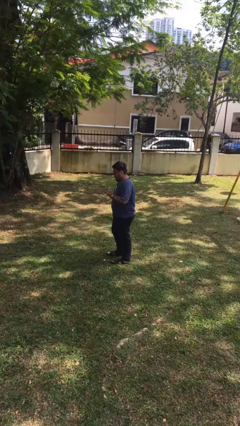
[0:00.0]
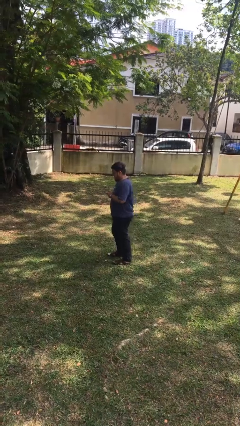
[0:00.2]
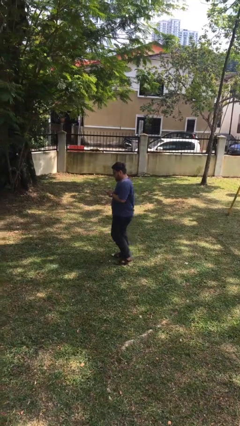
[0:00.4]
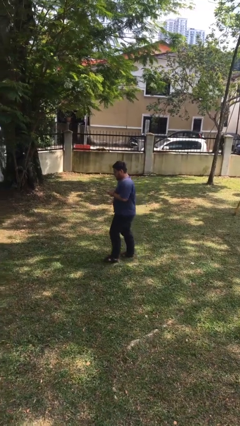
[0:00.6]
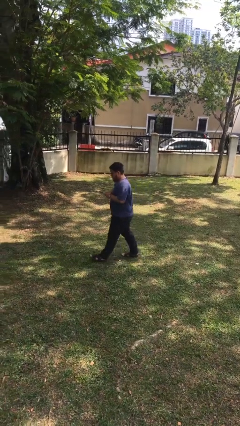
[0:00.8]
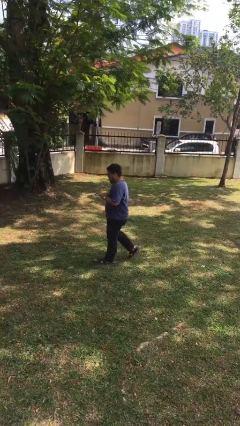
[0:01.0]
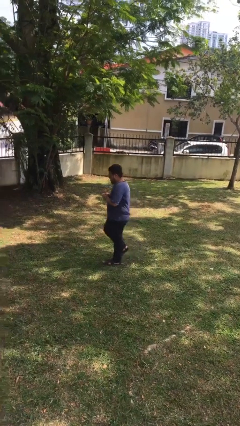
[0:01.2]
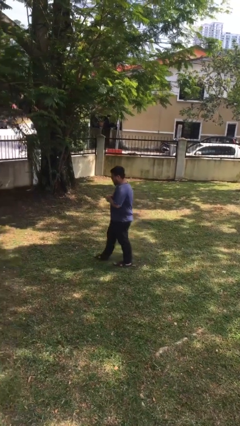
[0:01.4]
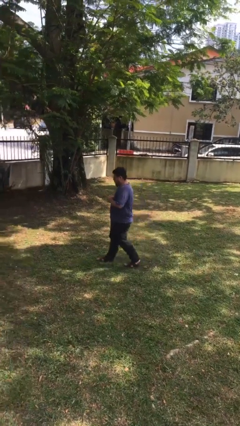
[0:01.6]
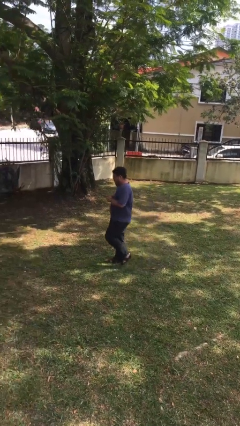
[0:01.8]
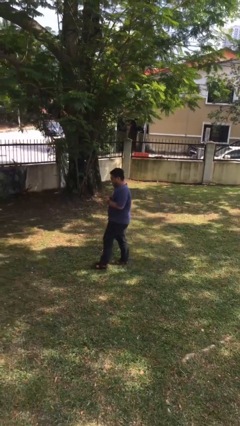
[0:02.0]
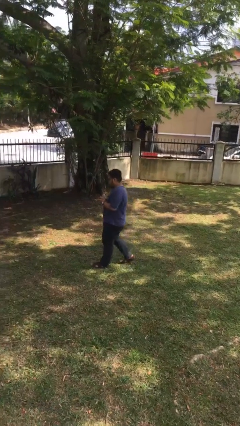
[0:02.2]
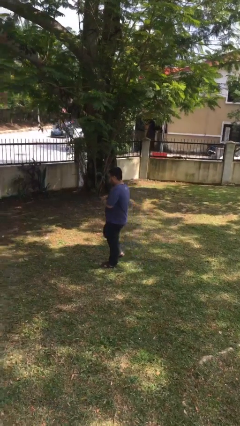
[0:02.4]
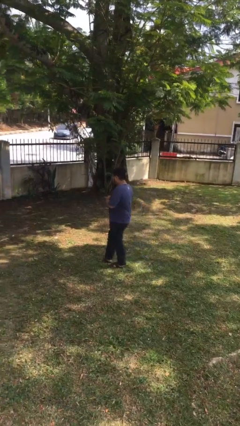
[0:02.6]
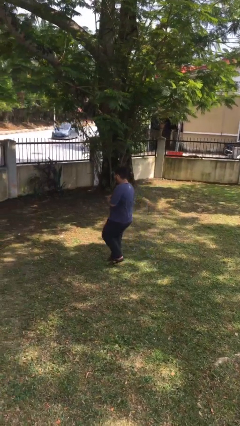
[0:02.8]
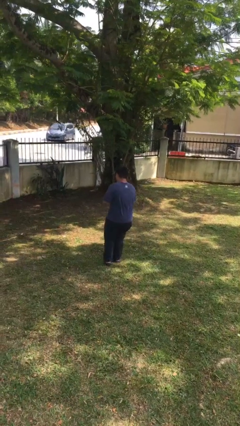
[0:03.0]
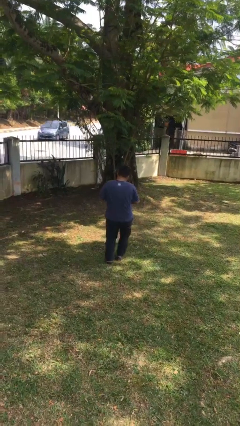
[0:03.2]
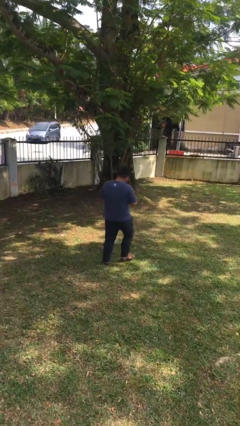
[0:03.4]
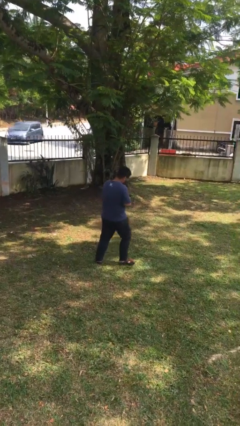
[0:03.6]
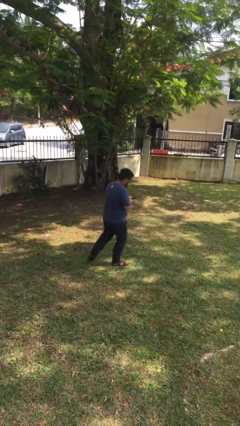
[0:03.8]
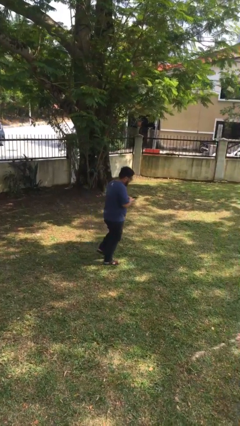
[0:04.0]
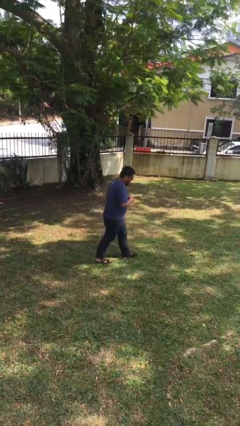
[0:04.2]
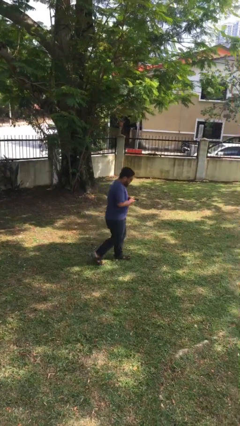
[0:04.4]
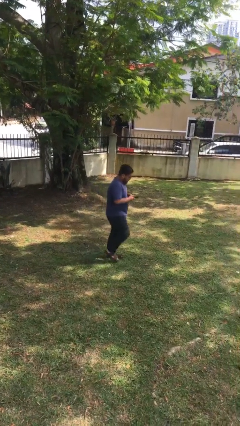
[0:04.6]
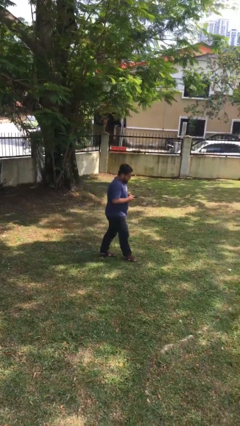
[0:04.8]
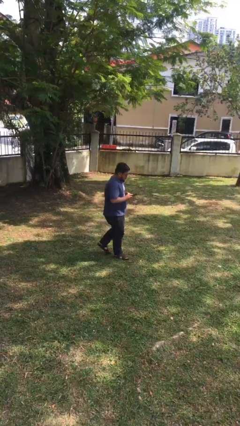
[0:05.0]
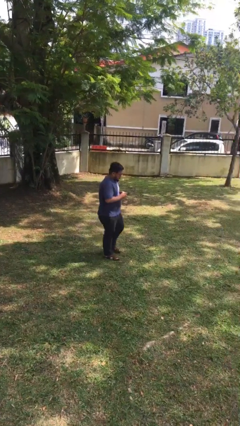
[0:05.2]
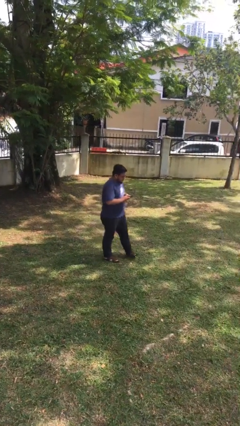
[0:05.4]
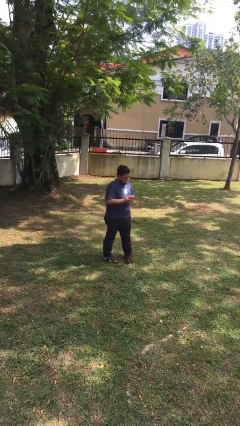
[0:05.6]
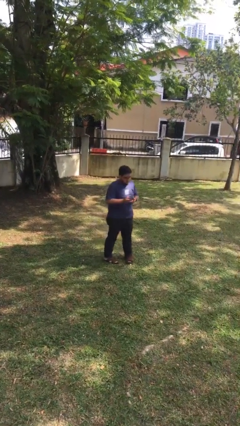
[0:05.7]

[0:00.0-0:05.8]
person texts on phone

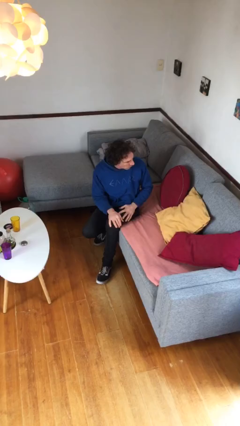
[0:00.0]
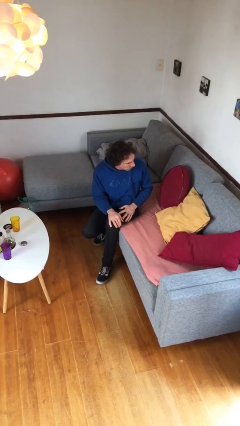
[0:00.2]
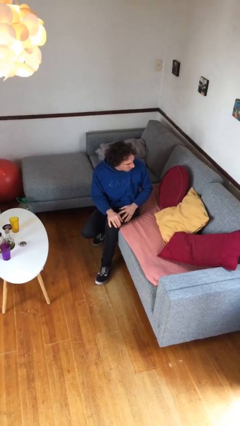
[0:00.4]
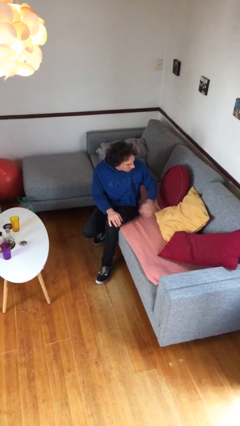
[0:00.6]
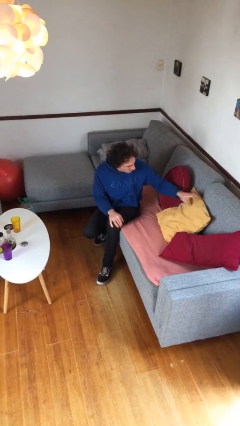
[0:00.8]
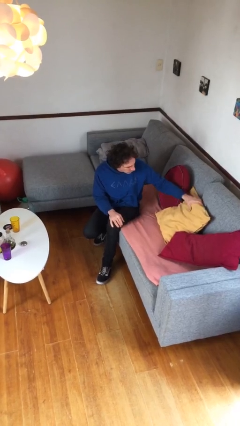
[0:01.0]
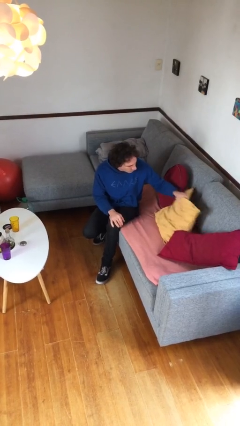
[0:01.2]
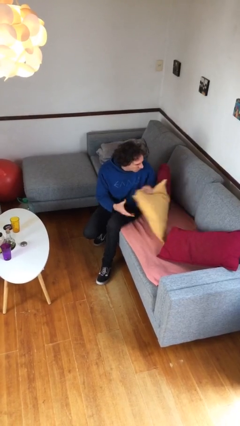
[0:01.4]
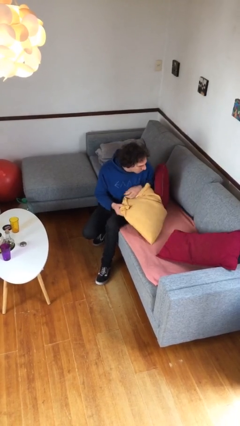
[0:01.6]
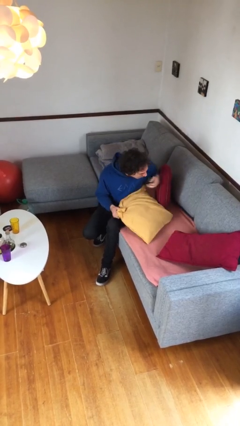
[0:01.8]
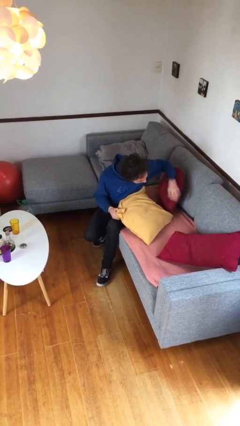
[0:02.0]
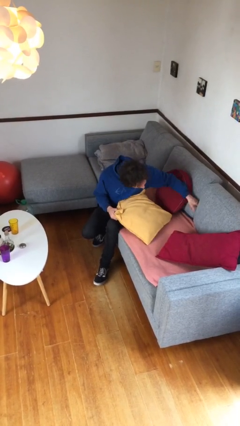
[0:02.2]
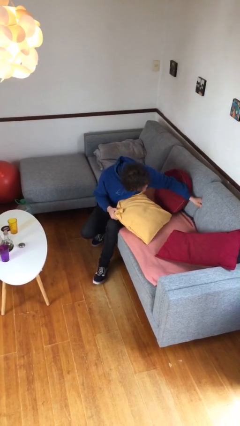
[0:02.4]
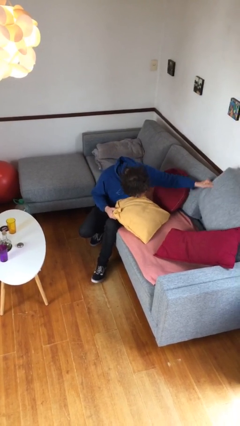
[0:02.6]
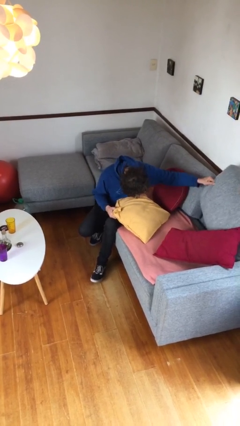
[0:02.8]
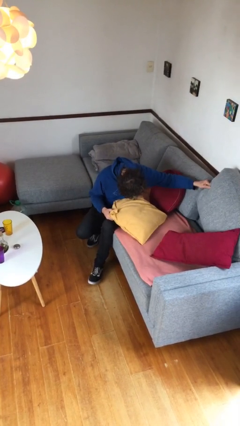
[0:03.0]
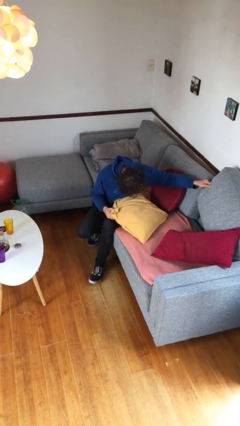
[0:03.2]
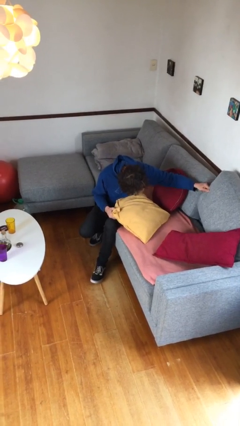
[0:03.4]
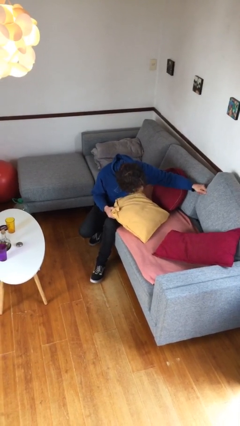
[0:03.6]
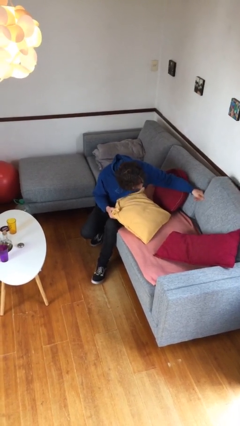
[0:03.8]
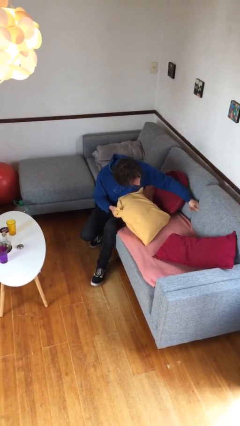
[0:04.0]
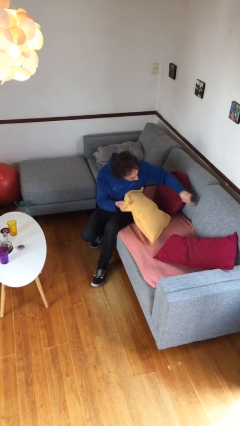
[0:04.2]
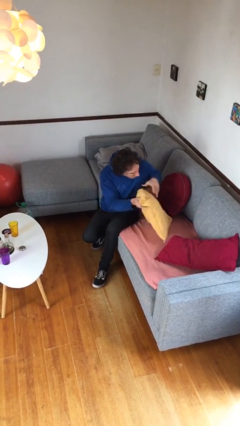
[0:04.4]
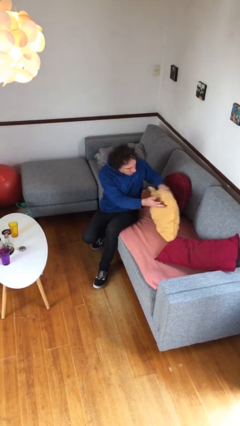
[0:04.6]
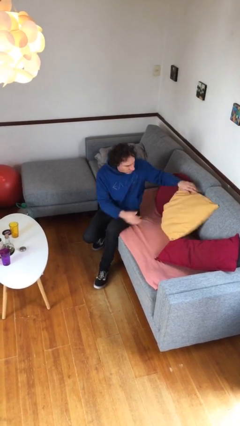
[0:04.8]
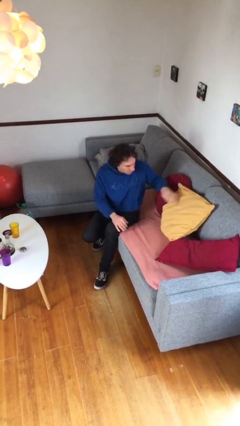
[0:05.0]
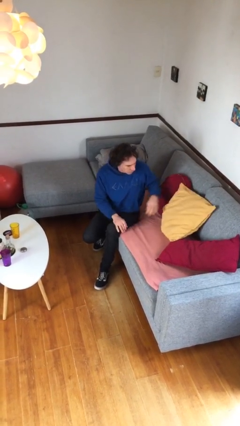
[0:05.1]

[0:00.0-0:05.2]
person searches in couch

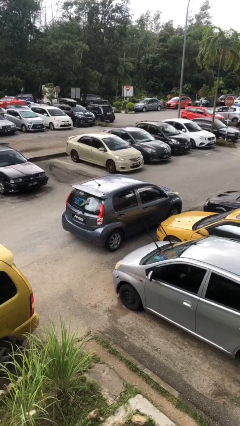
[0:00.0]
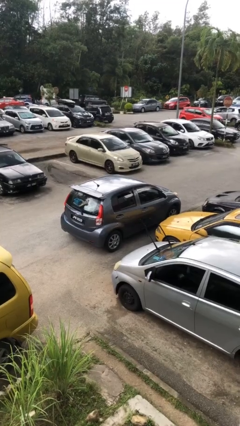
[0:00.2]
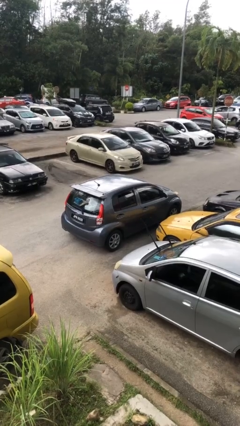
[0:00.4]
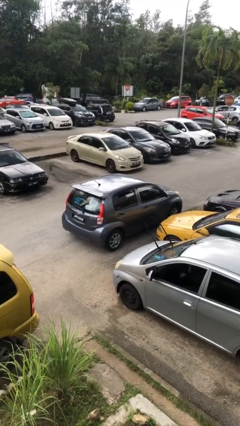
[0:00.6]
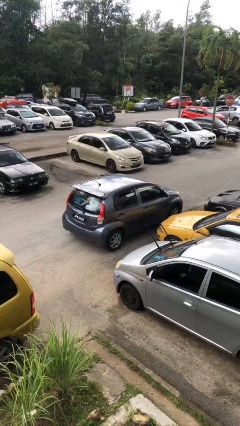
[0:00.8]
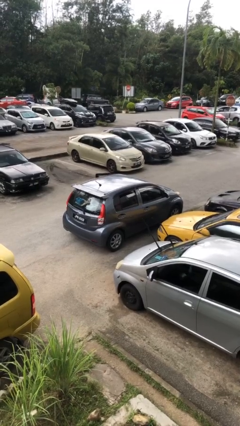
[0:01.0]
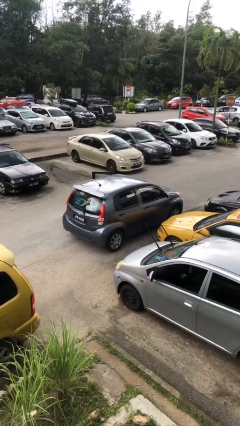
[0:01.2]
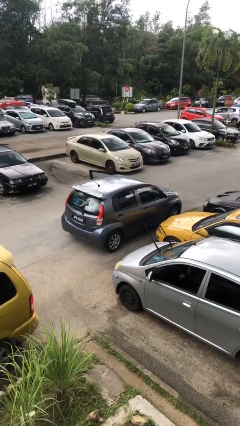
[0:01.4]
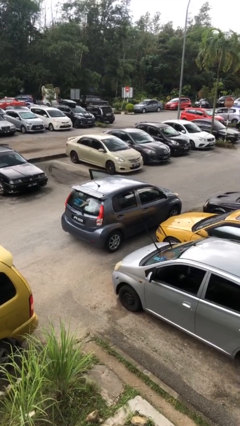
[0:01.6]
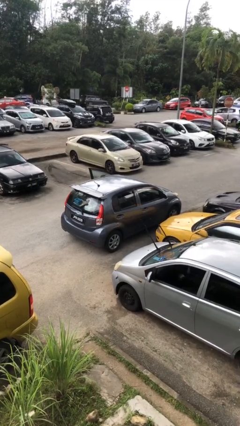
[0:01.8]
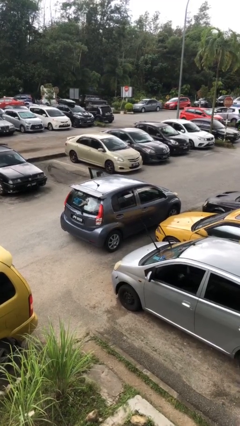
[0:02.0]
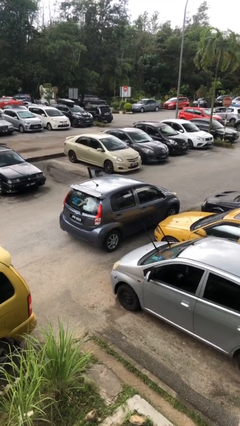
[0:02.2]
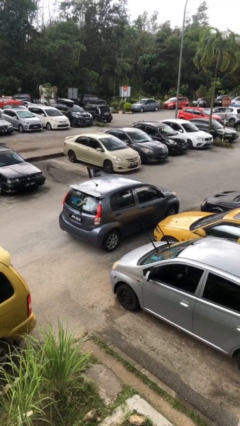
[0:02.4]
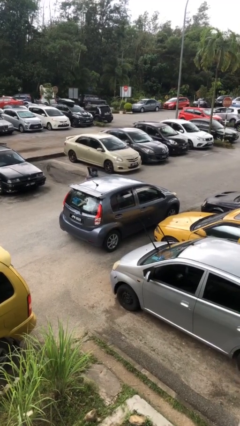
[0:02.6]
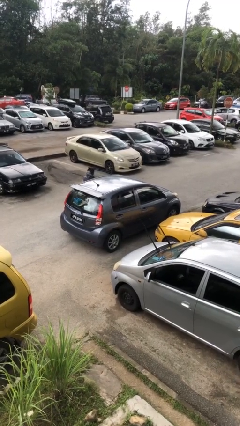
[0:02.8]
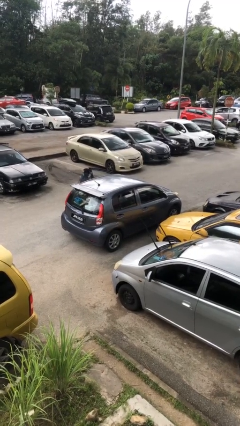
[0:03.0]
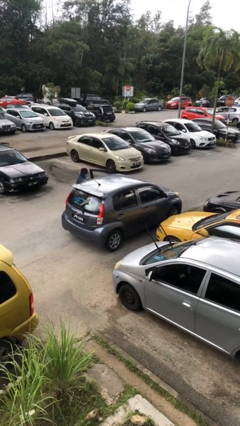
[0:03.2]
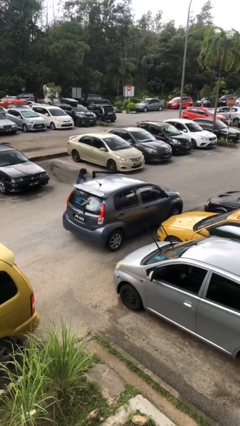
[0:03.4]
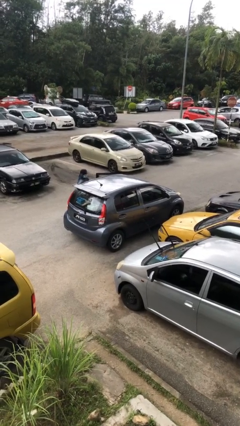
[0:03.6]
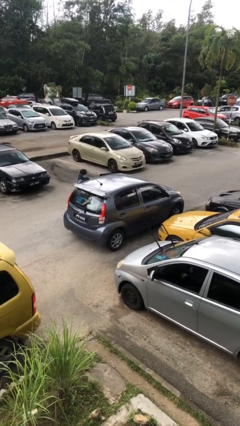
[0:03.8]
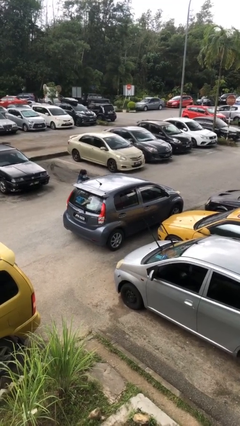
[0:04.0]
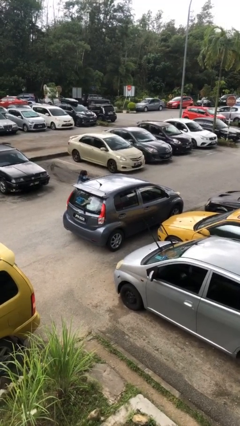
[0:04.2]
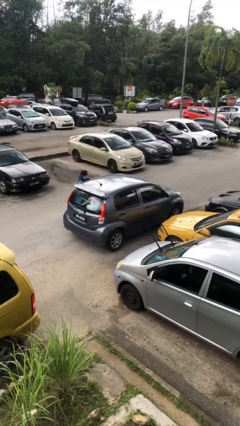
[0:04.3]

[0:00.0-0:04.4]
car drops off person

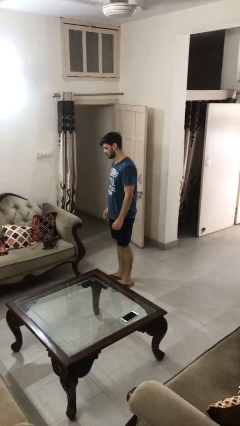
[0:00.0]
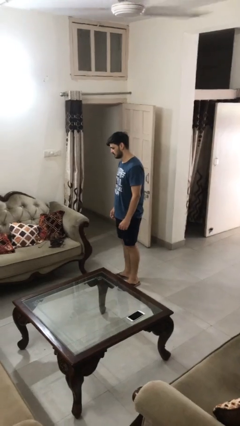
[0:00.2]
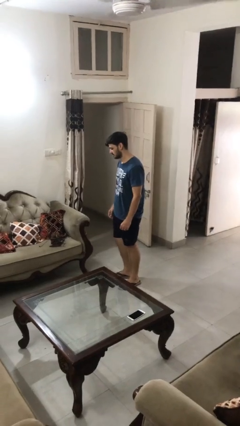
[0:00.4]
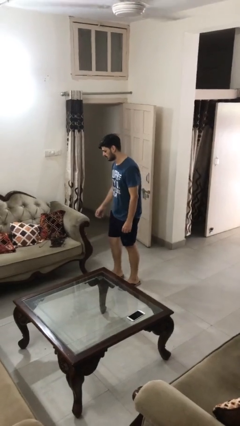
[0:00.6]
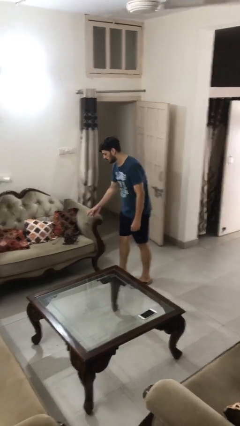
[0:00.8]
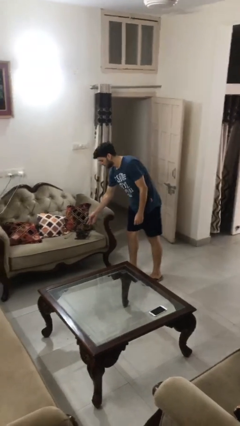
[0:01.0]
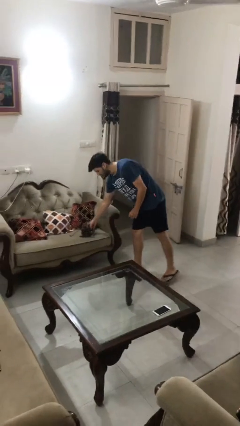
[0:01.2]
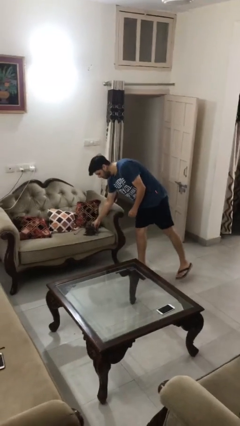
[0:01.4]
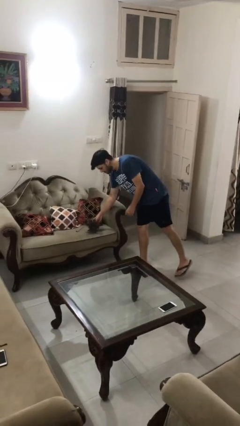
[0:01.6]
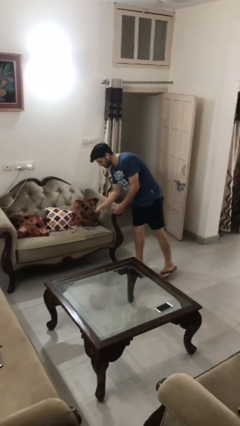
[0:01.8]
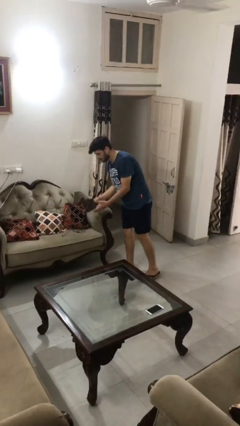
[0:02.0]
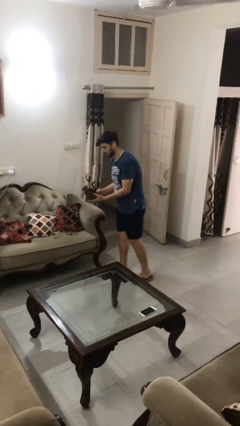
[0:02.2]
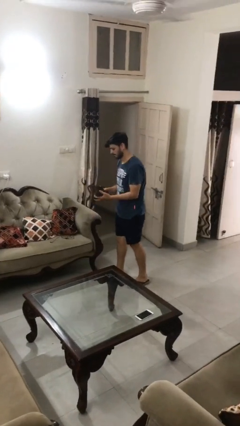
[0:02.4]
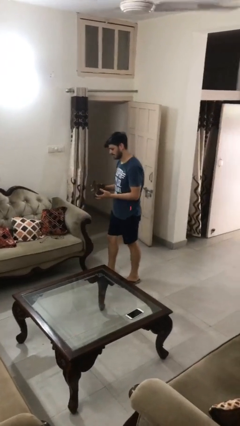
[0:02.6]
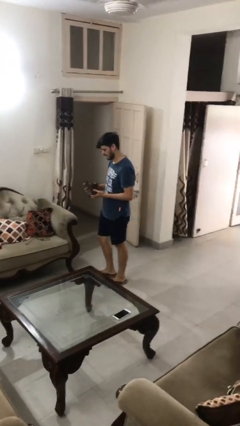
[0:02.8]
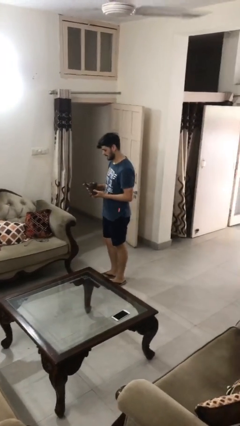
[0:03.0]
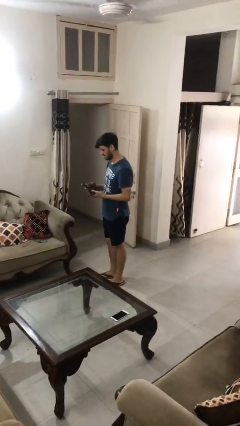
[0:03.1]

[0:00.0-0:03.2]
person picks up object from couch
